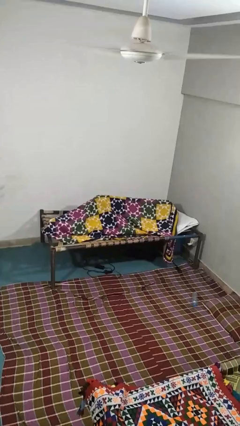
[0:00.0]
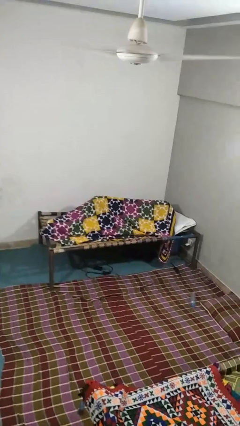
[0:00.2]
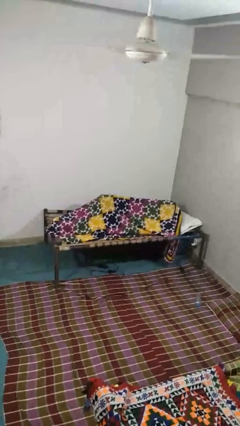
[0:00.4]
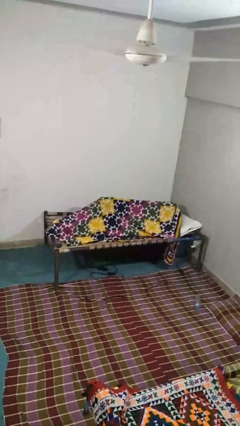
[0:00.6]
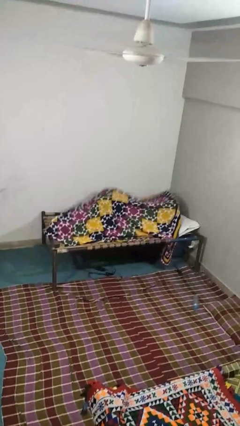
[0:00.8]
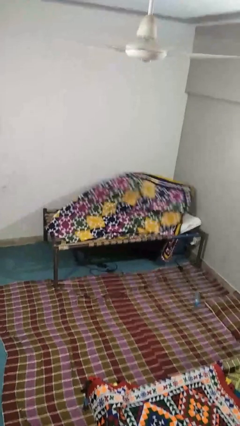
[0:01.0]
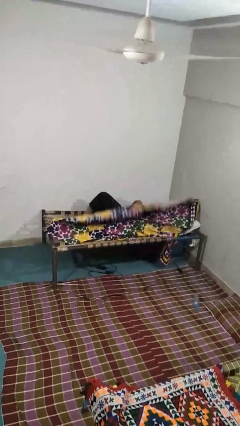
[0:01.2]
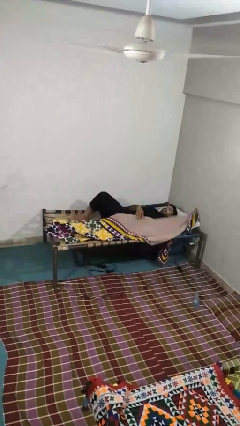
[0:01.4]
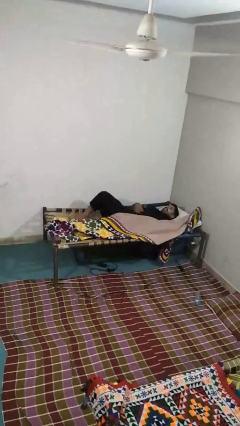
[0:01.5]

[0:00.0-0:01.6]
person uncovers with blanket

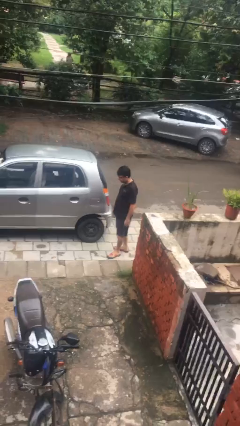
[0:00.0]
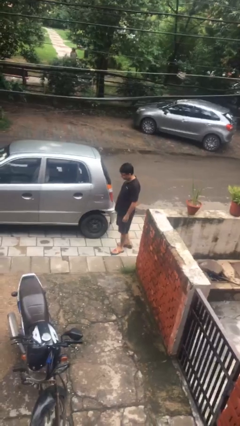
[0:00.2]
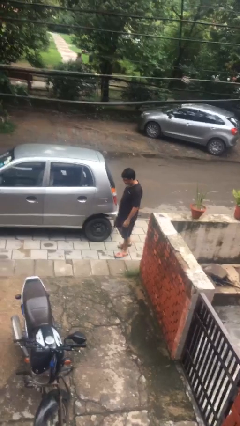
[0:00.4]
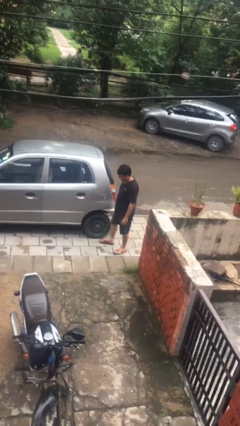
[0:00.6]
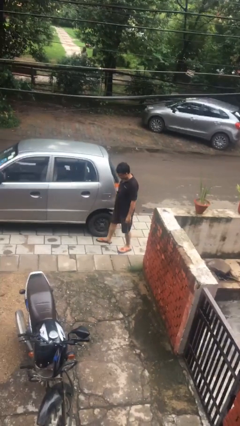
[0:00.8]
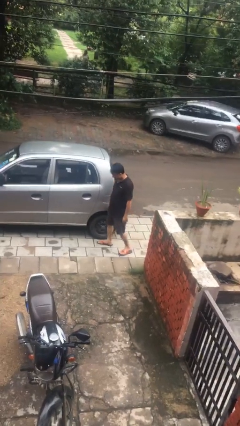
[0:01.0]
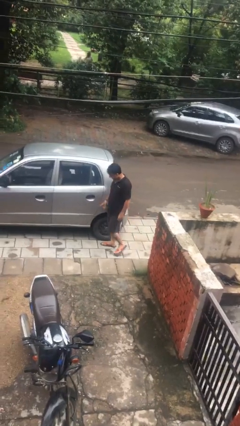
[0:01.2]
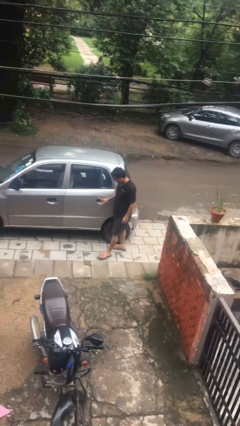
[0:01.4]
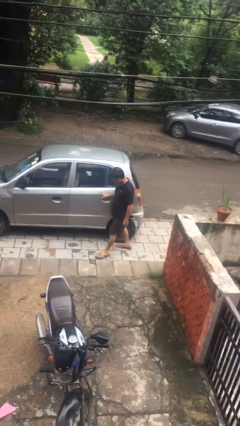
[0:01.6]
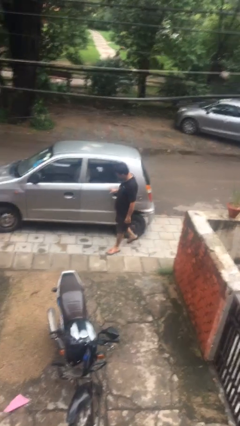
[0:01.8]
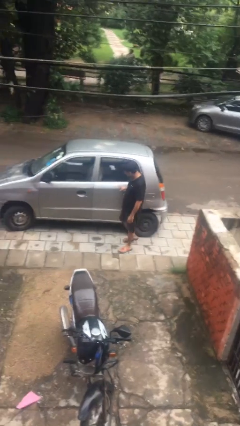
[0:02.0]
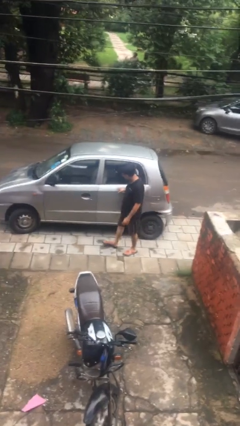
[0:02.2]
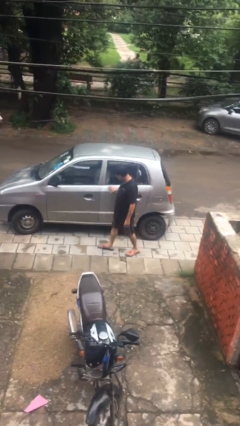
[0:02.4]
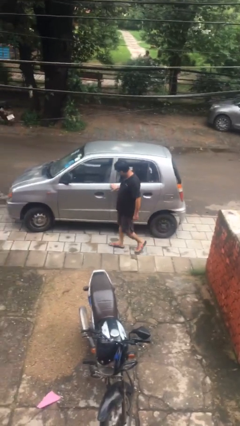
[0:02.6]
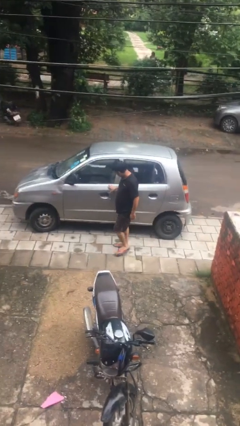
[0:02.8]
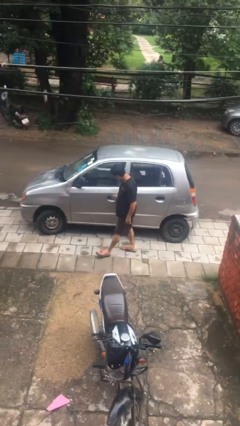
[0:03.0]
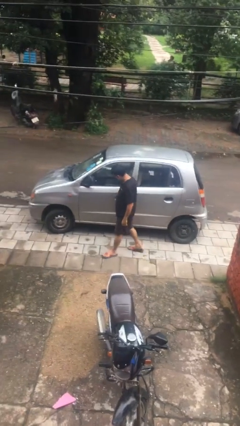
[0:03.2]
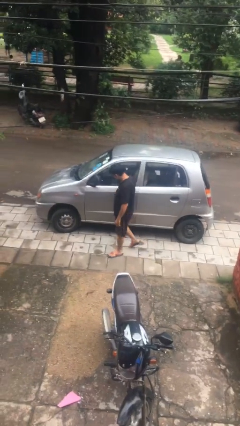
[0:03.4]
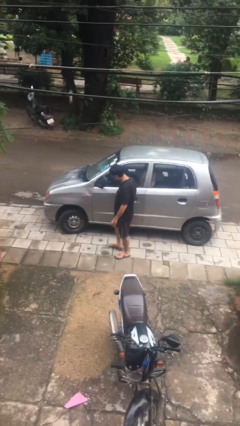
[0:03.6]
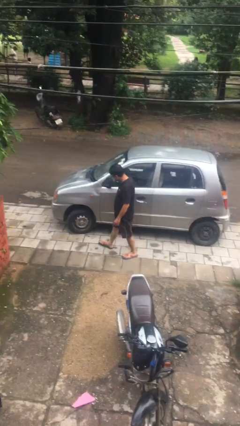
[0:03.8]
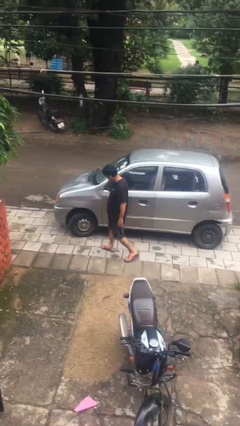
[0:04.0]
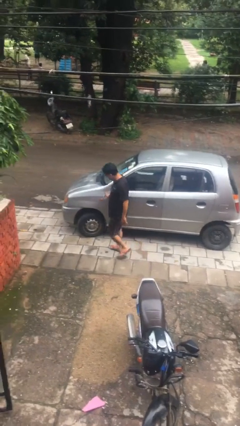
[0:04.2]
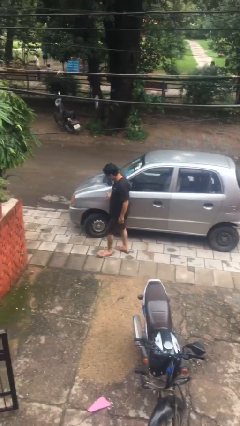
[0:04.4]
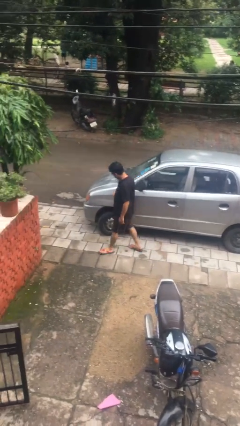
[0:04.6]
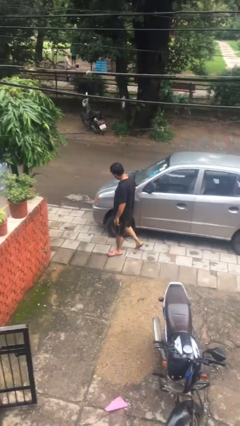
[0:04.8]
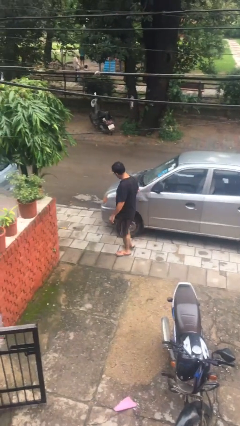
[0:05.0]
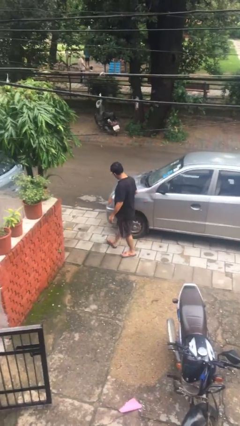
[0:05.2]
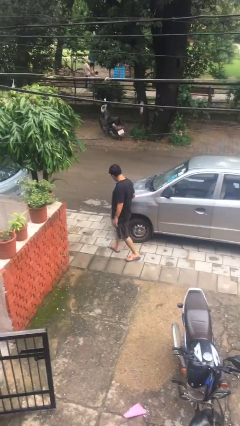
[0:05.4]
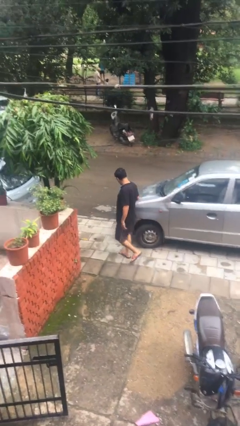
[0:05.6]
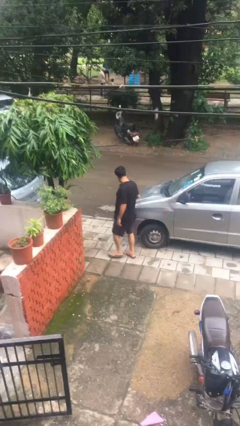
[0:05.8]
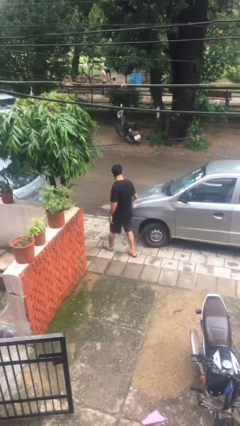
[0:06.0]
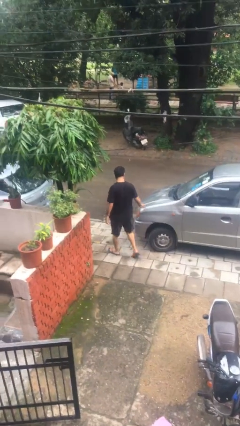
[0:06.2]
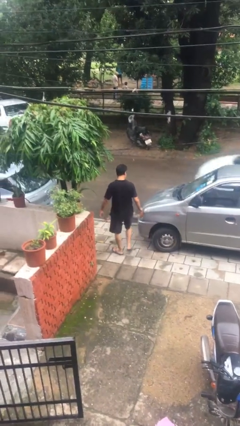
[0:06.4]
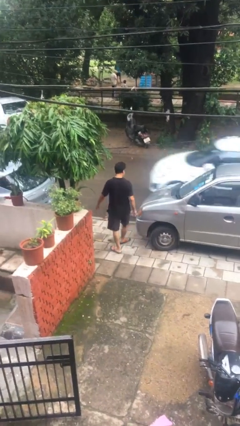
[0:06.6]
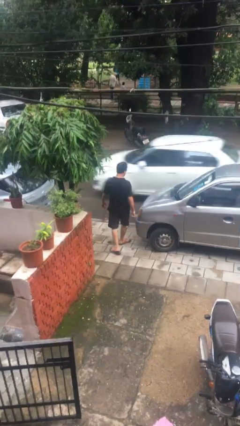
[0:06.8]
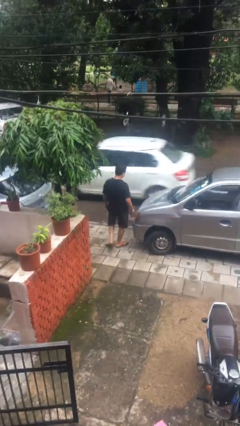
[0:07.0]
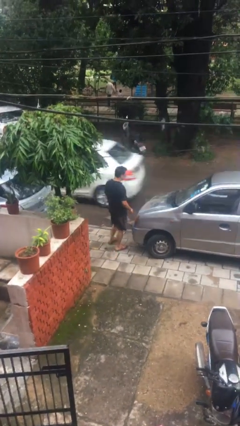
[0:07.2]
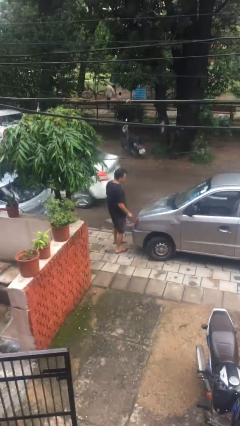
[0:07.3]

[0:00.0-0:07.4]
person walks around car

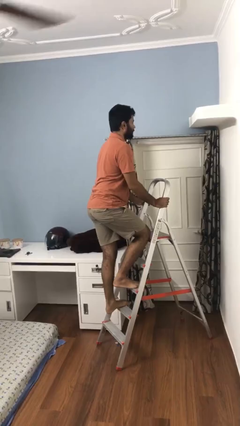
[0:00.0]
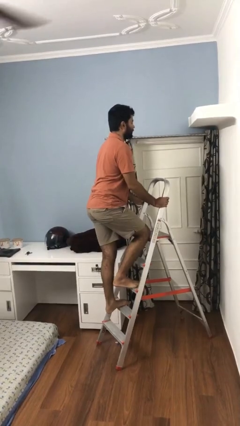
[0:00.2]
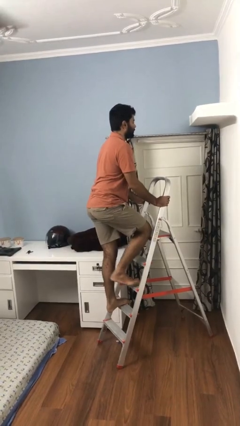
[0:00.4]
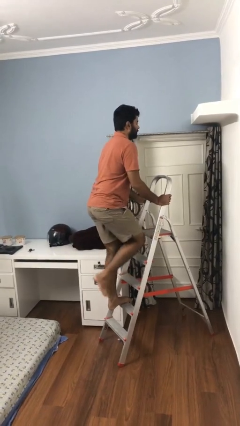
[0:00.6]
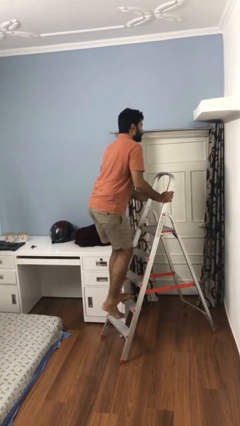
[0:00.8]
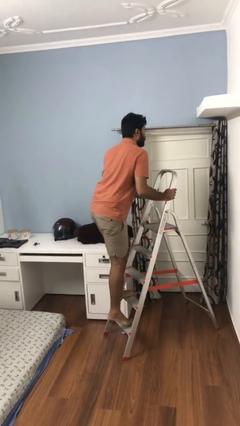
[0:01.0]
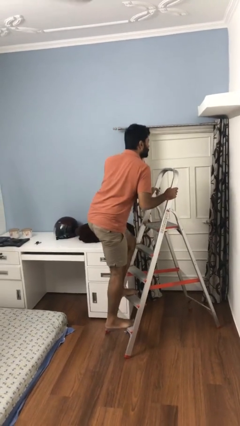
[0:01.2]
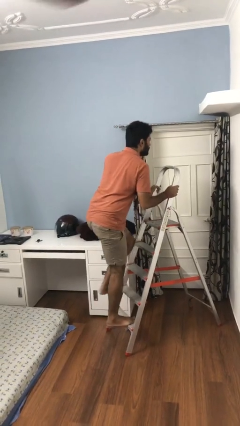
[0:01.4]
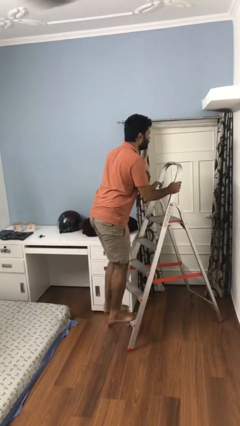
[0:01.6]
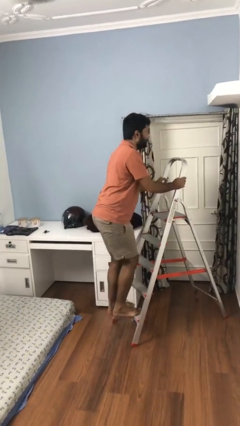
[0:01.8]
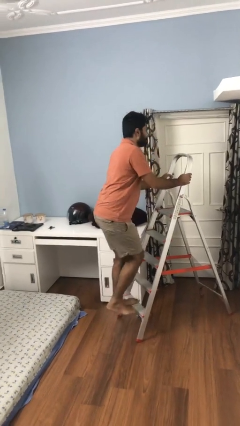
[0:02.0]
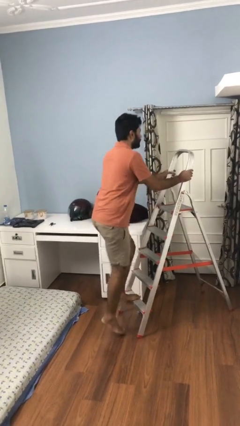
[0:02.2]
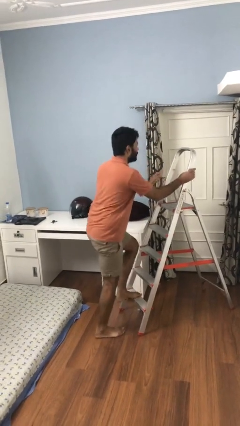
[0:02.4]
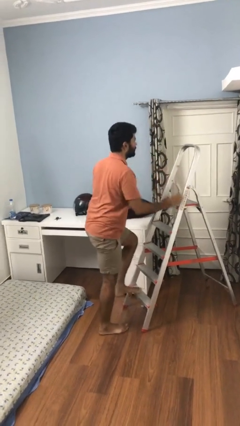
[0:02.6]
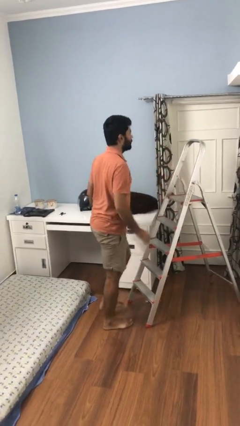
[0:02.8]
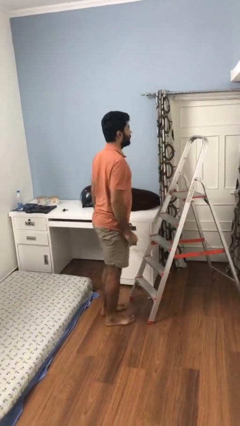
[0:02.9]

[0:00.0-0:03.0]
person climbs down ladder

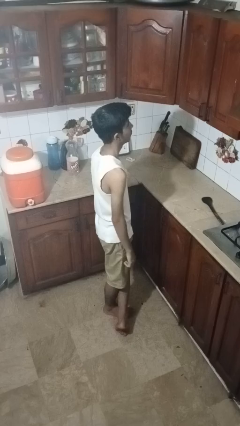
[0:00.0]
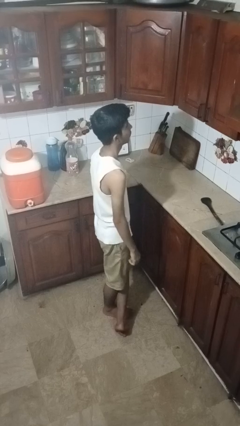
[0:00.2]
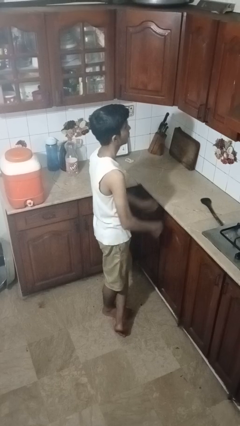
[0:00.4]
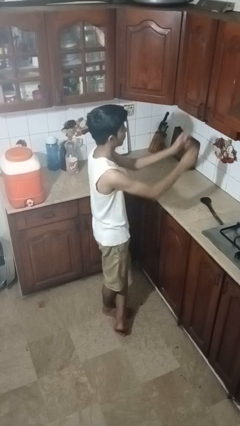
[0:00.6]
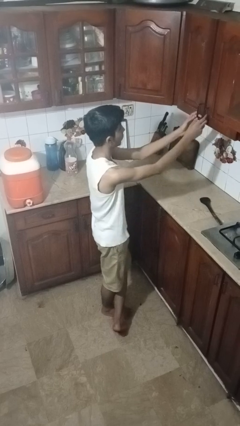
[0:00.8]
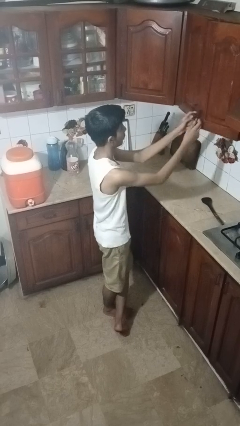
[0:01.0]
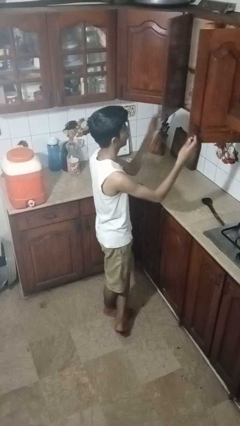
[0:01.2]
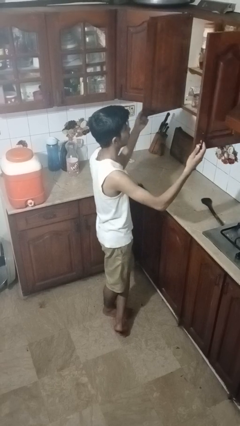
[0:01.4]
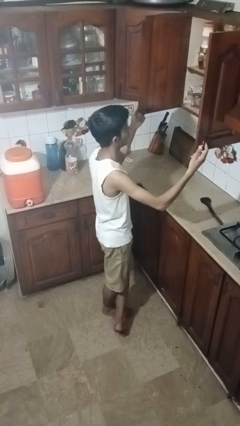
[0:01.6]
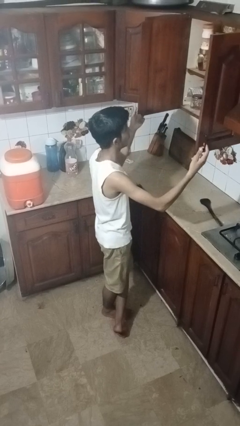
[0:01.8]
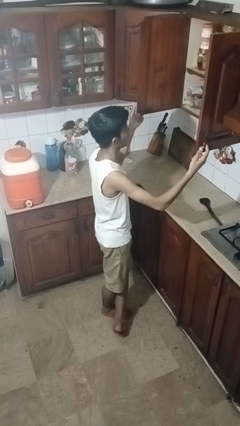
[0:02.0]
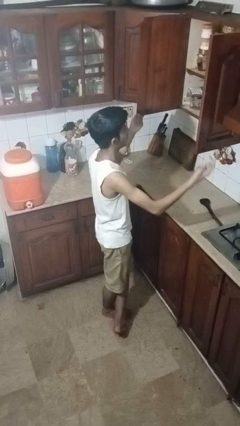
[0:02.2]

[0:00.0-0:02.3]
person opens cabinet

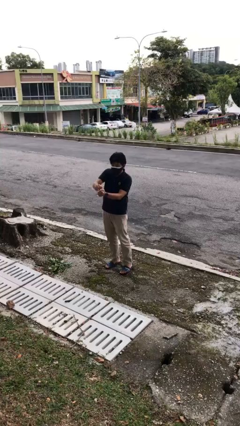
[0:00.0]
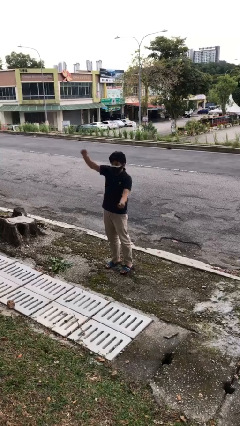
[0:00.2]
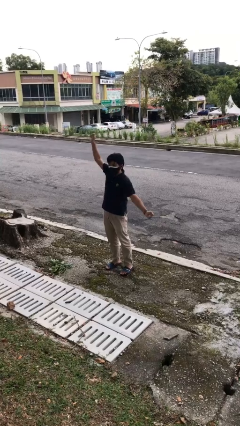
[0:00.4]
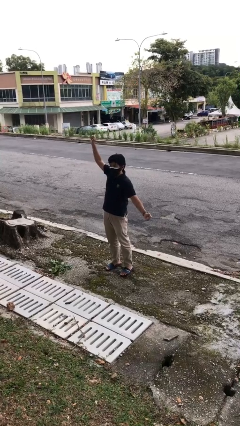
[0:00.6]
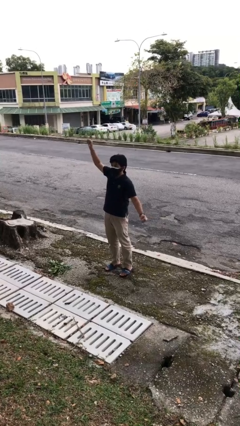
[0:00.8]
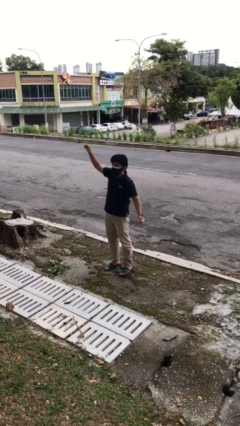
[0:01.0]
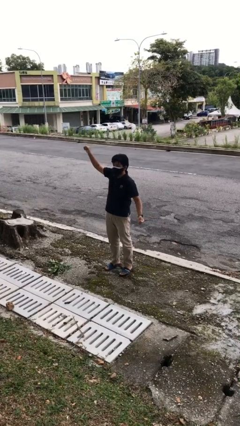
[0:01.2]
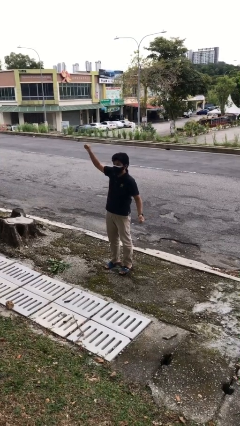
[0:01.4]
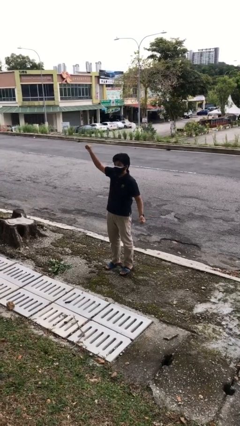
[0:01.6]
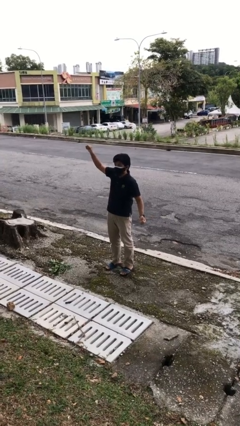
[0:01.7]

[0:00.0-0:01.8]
person gestures zoom in

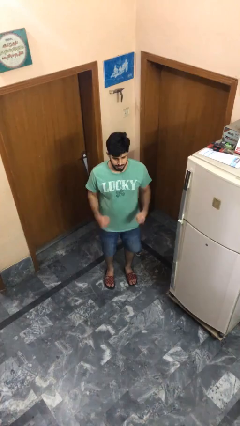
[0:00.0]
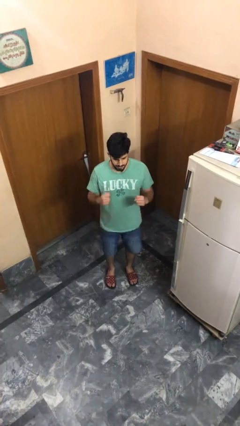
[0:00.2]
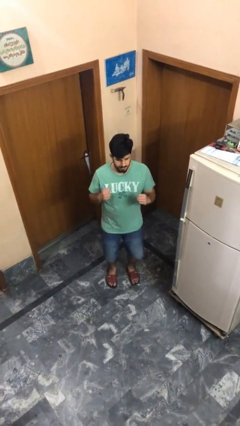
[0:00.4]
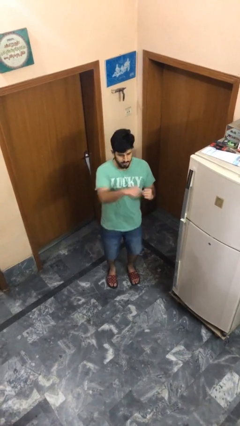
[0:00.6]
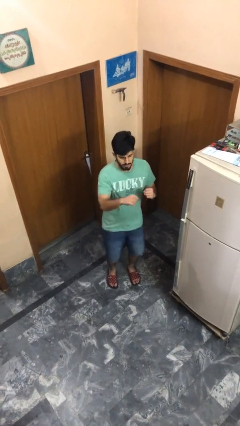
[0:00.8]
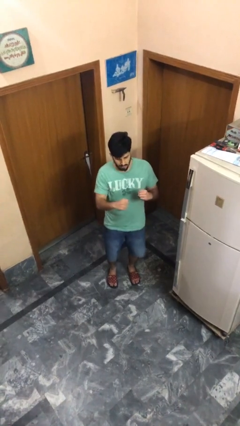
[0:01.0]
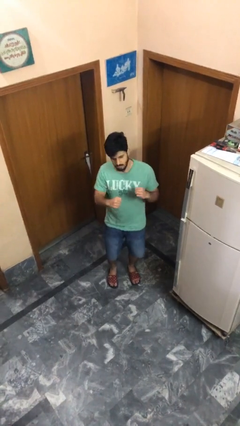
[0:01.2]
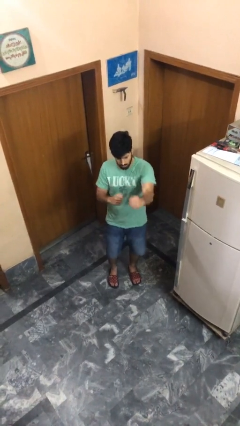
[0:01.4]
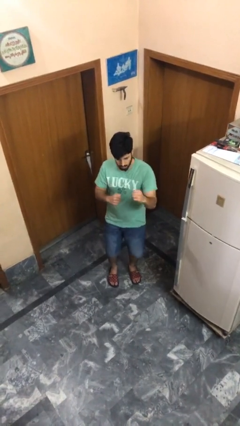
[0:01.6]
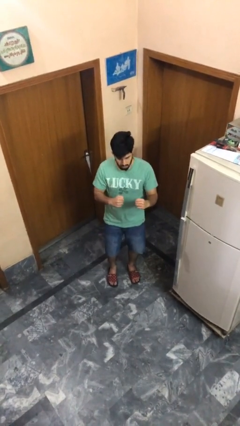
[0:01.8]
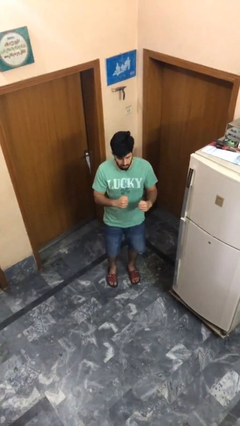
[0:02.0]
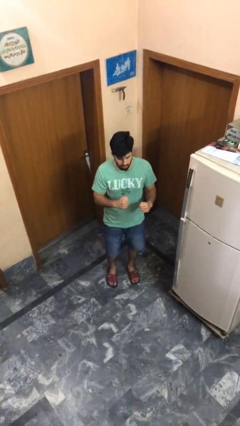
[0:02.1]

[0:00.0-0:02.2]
person punches
